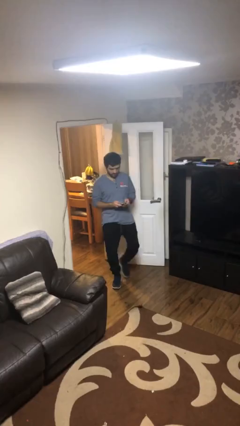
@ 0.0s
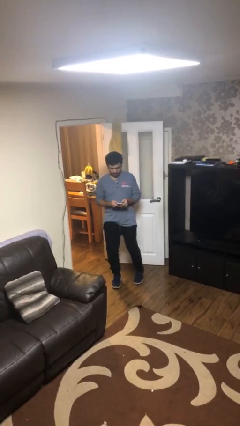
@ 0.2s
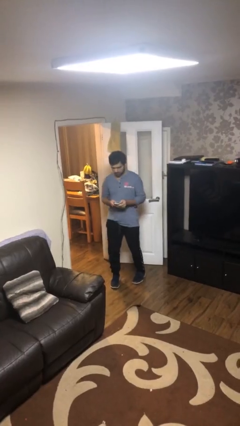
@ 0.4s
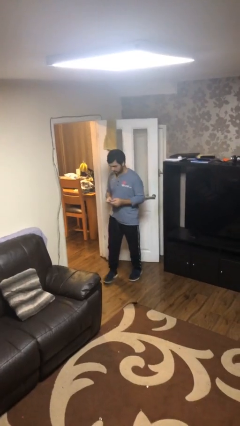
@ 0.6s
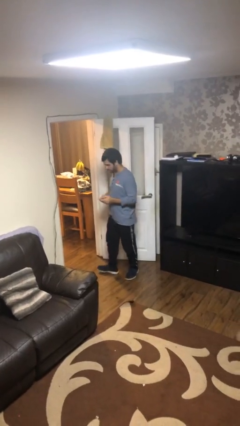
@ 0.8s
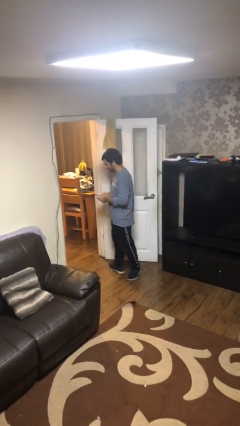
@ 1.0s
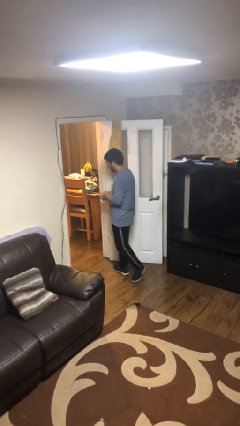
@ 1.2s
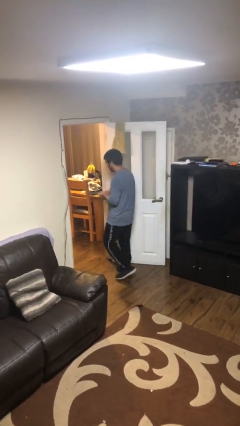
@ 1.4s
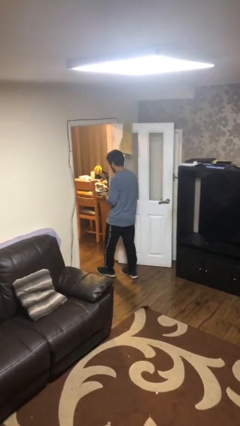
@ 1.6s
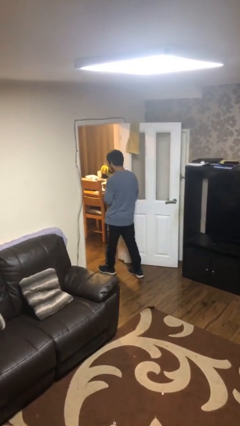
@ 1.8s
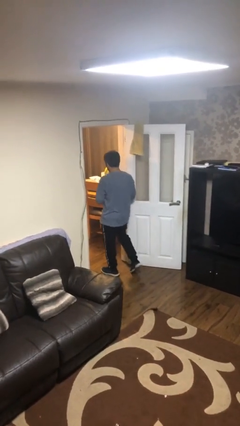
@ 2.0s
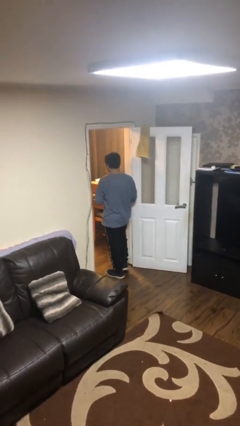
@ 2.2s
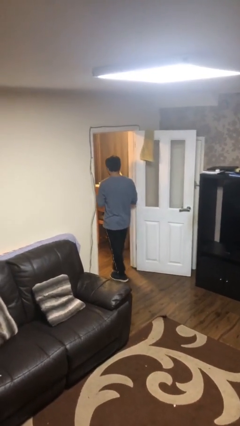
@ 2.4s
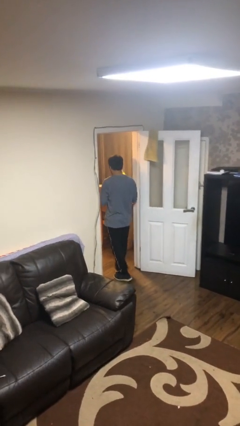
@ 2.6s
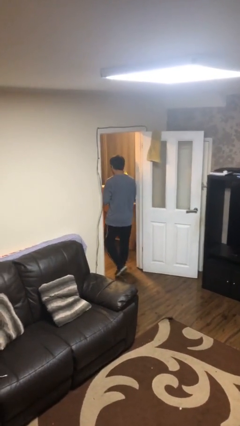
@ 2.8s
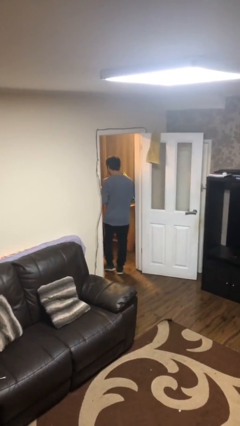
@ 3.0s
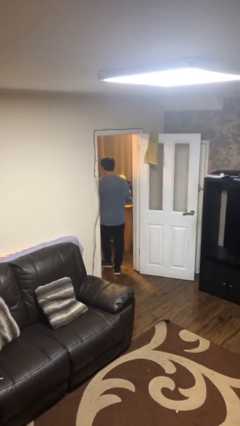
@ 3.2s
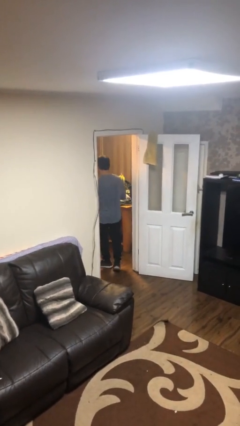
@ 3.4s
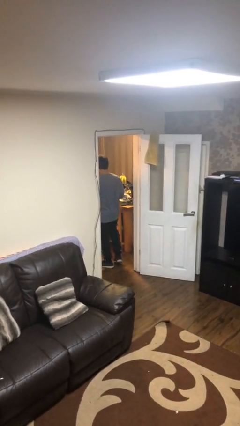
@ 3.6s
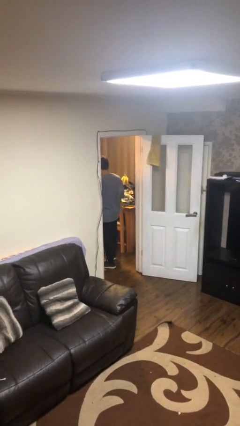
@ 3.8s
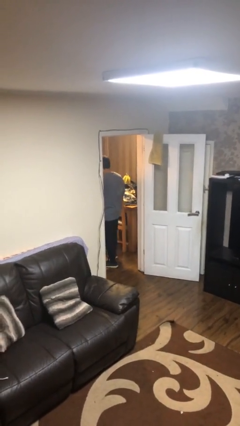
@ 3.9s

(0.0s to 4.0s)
person exits scene through structure

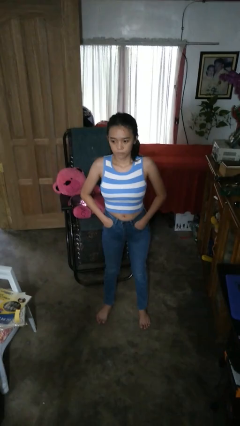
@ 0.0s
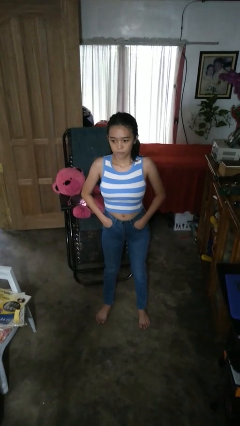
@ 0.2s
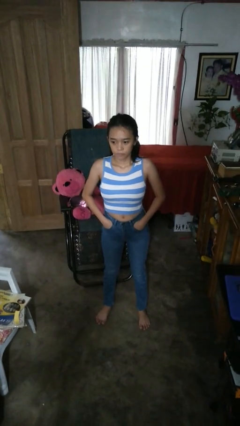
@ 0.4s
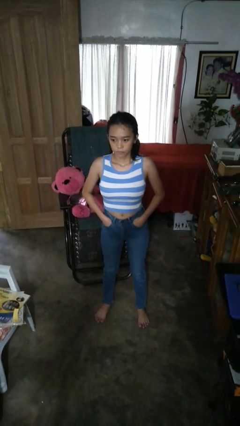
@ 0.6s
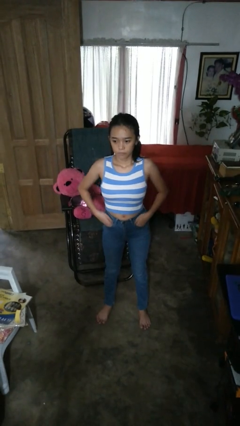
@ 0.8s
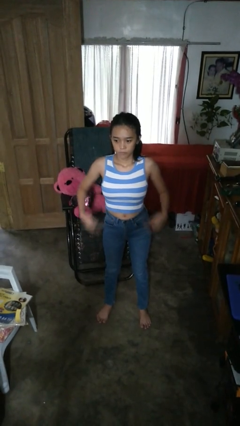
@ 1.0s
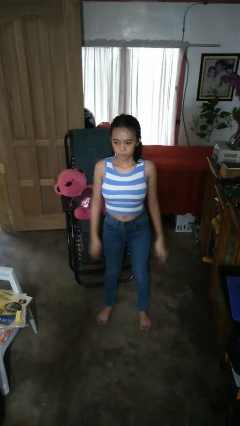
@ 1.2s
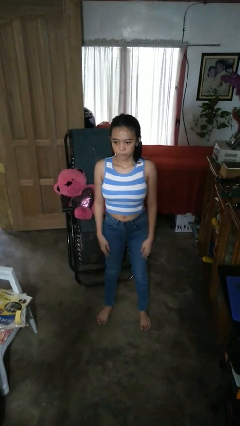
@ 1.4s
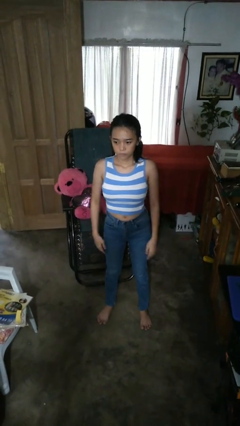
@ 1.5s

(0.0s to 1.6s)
person puts hands in back pockets

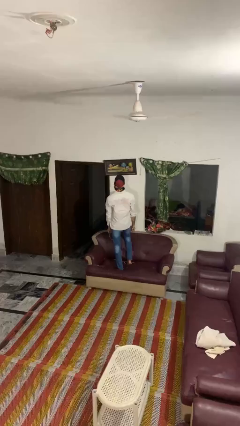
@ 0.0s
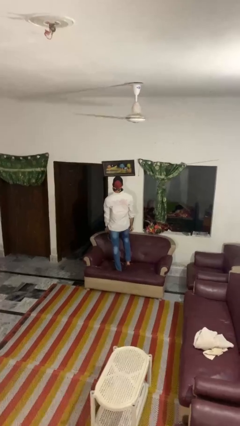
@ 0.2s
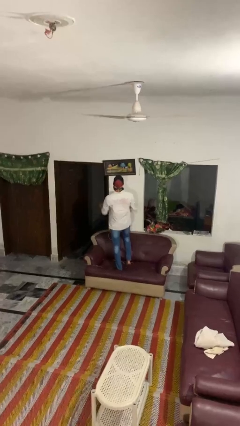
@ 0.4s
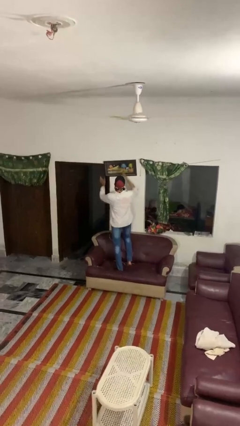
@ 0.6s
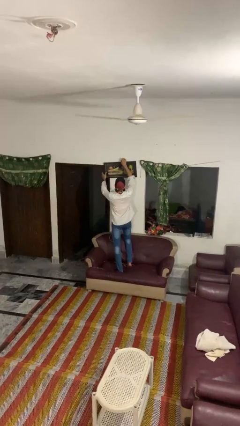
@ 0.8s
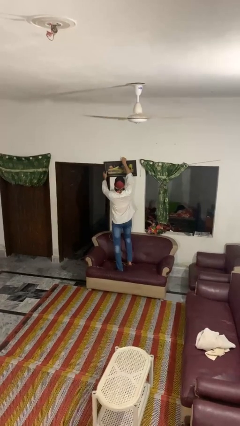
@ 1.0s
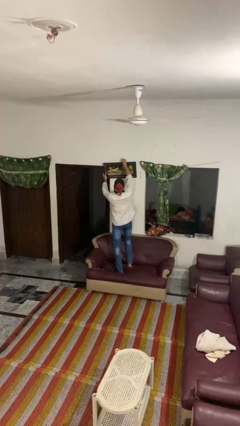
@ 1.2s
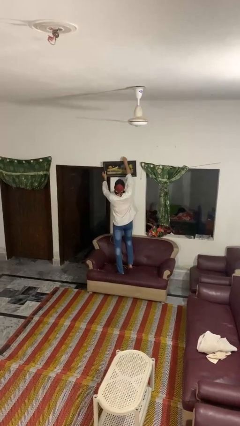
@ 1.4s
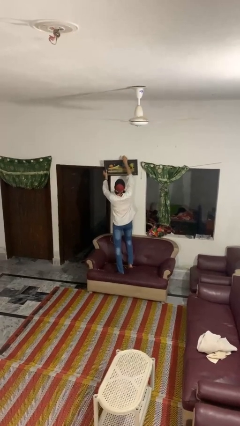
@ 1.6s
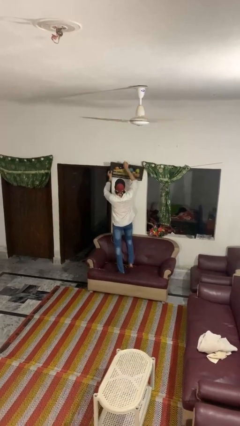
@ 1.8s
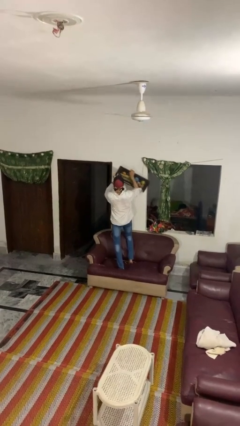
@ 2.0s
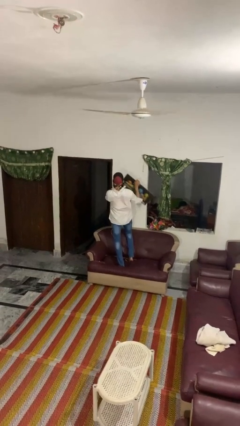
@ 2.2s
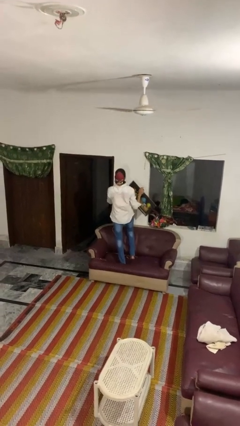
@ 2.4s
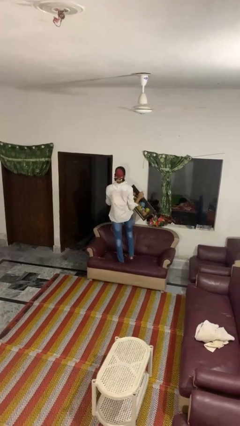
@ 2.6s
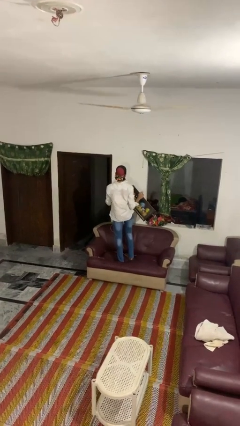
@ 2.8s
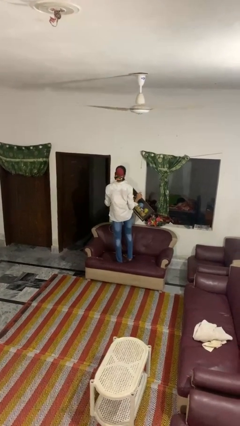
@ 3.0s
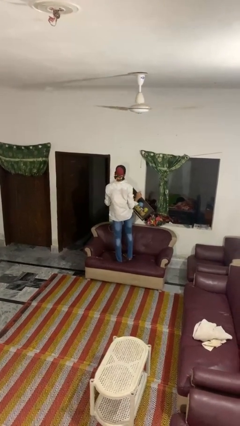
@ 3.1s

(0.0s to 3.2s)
person takes down picture frame

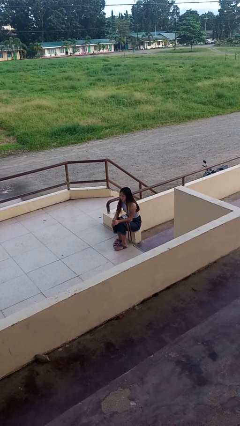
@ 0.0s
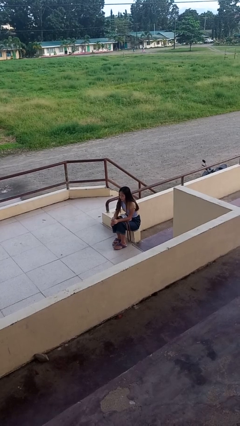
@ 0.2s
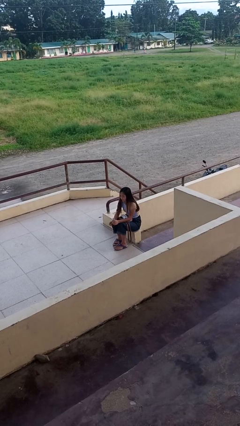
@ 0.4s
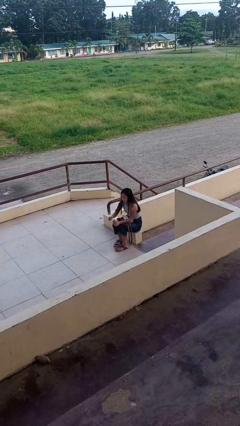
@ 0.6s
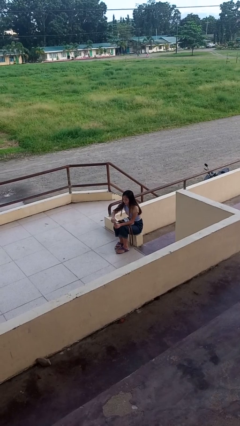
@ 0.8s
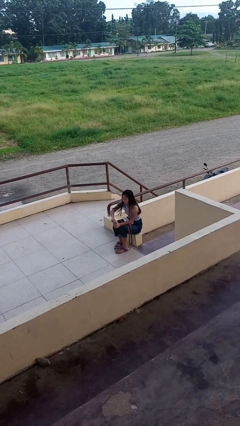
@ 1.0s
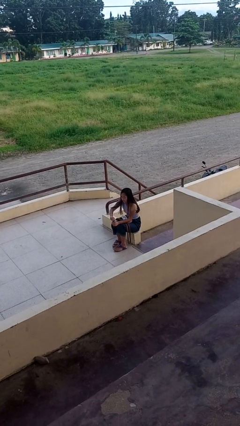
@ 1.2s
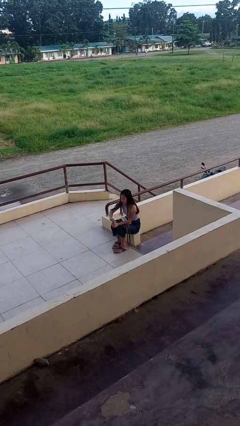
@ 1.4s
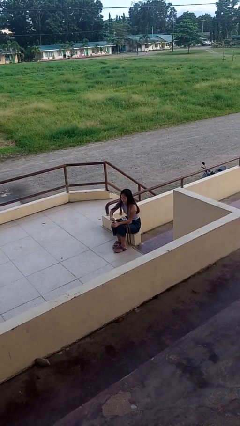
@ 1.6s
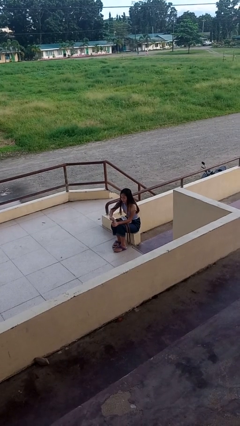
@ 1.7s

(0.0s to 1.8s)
person opens beverage can

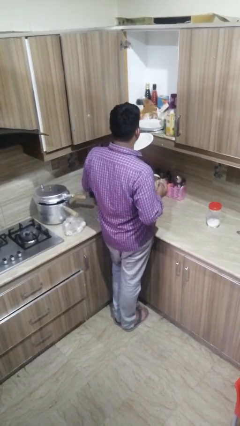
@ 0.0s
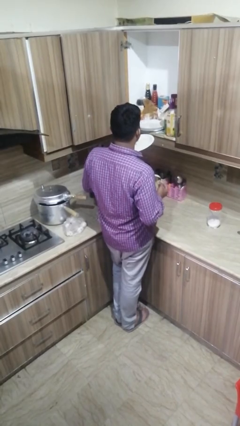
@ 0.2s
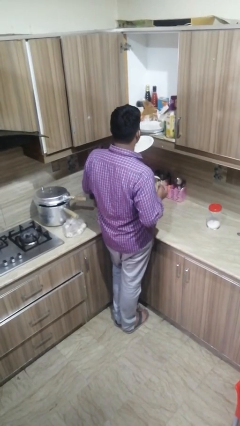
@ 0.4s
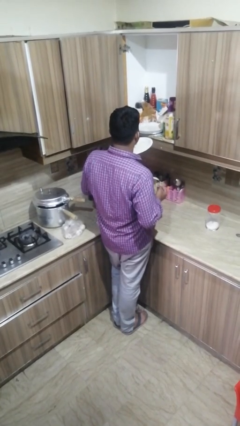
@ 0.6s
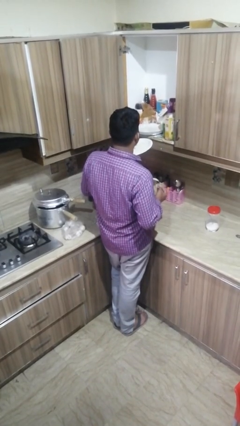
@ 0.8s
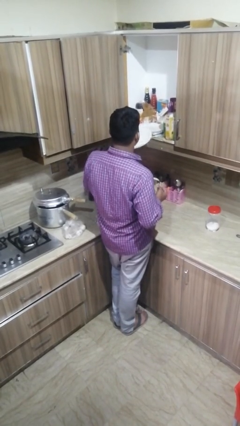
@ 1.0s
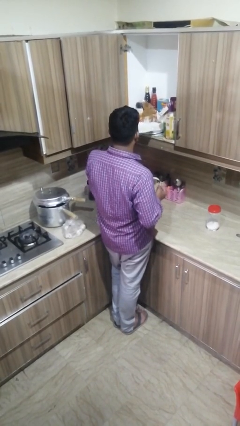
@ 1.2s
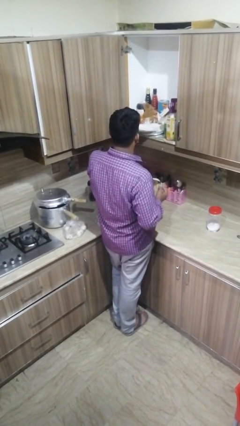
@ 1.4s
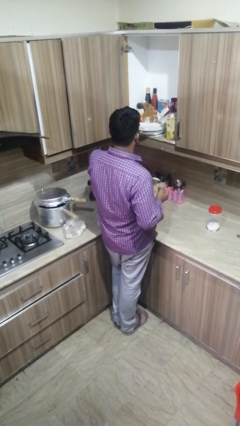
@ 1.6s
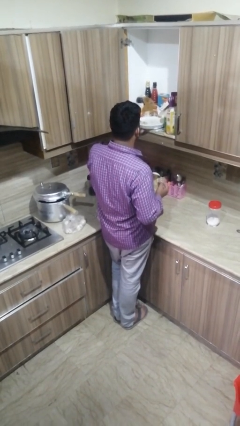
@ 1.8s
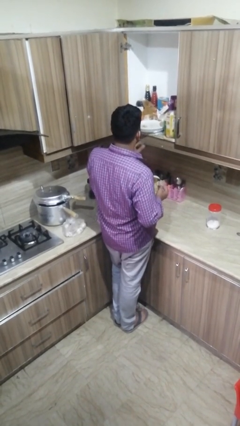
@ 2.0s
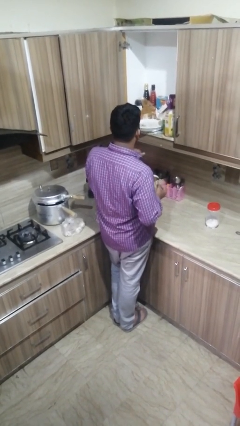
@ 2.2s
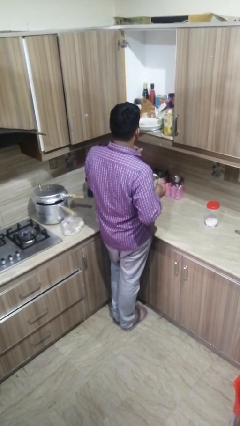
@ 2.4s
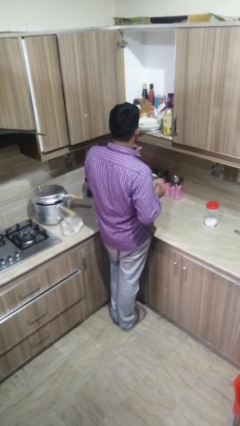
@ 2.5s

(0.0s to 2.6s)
person puts object in cabinet

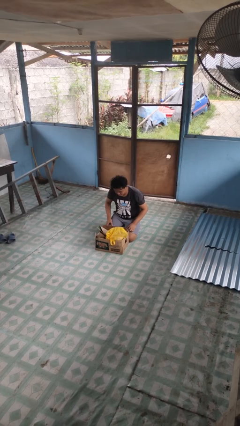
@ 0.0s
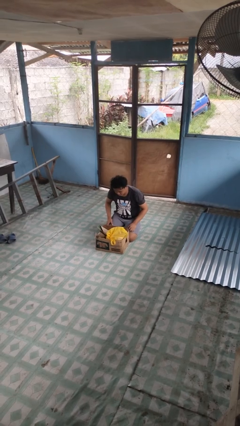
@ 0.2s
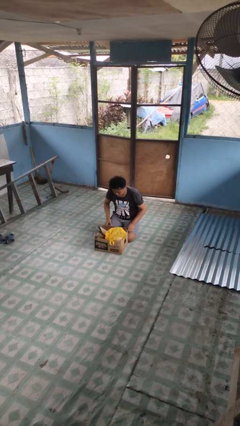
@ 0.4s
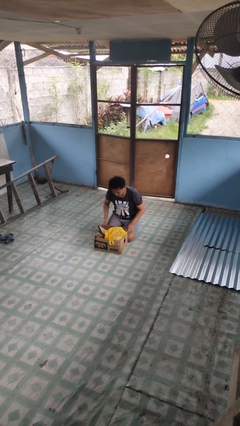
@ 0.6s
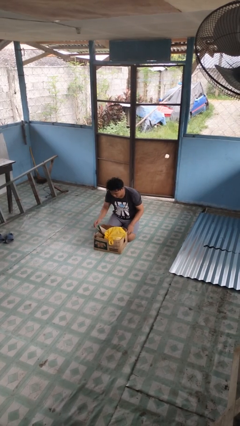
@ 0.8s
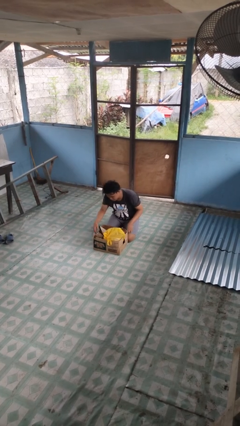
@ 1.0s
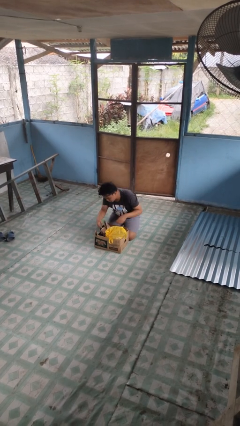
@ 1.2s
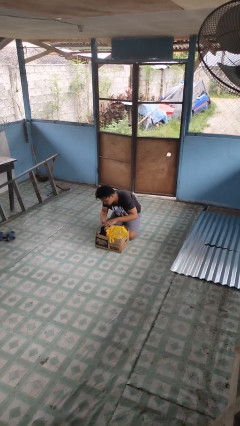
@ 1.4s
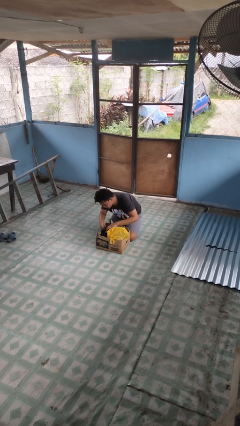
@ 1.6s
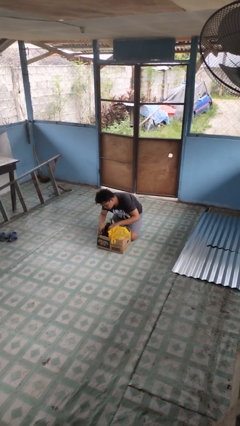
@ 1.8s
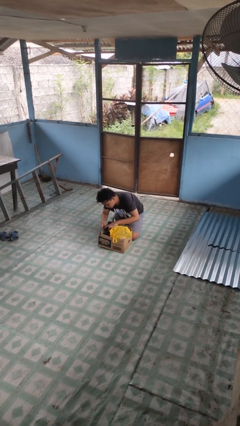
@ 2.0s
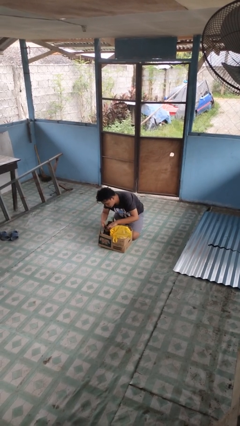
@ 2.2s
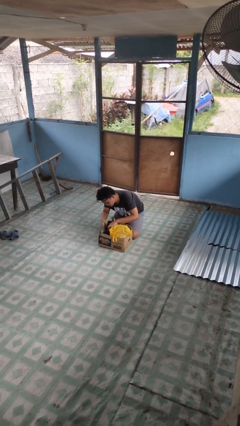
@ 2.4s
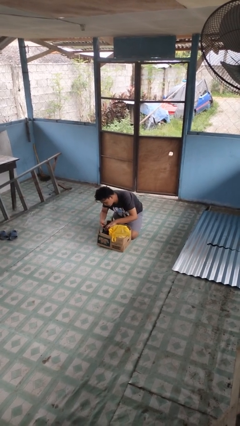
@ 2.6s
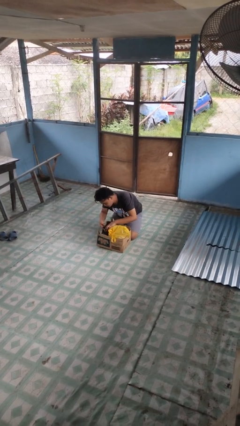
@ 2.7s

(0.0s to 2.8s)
person searches in box

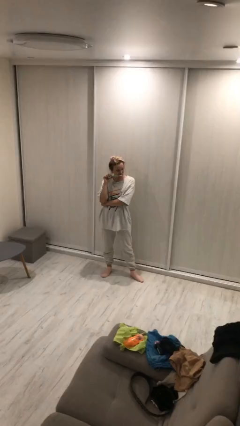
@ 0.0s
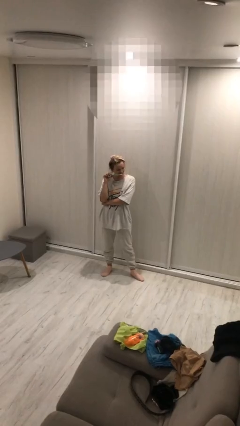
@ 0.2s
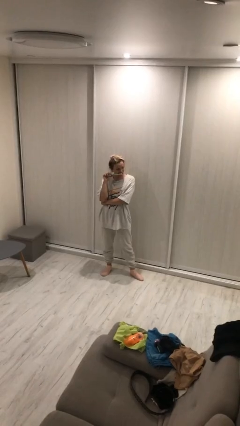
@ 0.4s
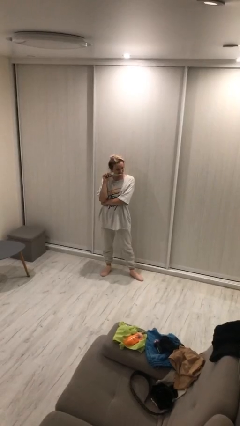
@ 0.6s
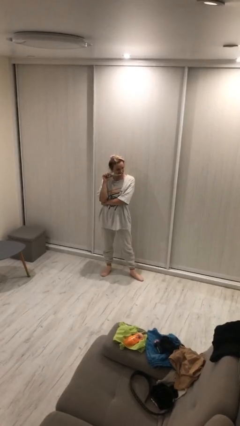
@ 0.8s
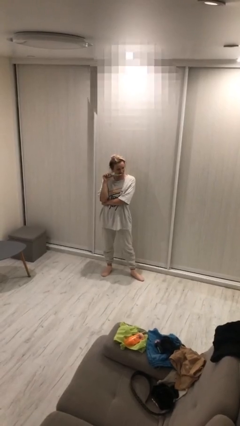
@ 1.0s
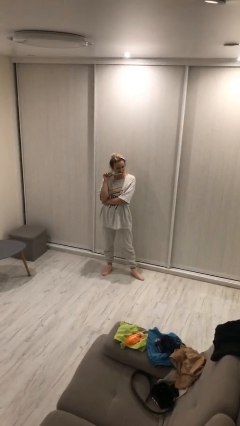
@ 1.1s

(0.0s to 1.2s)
person brushes teeth
